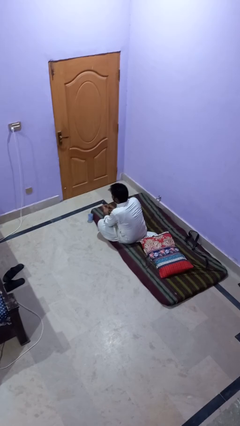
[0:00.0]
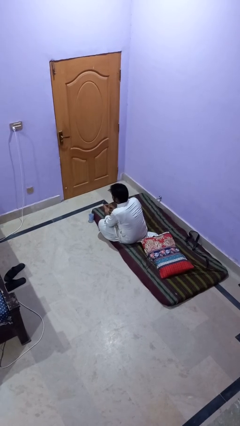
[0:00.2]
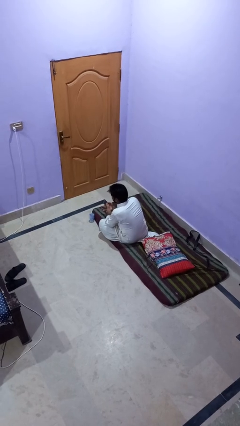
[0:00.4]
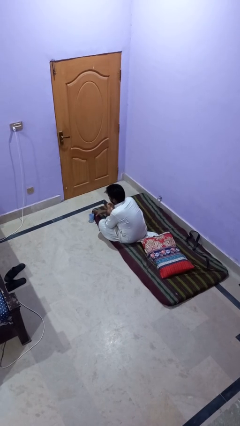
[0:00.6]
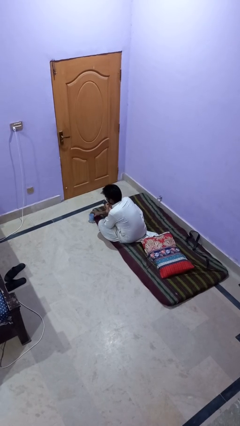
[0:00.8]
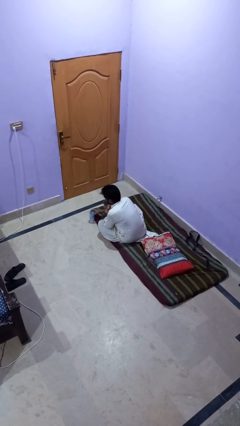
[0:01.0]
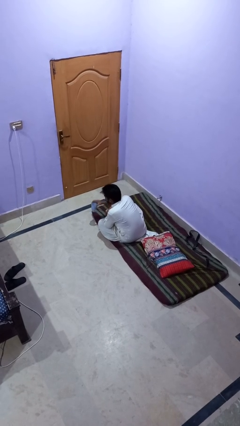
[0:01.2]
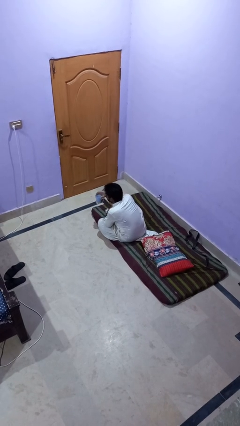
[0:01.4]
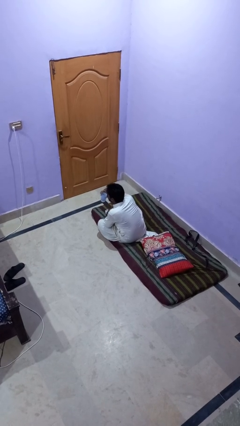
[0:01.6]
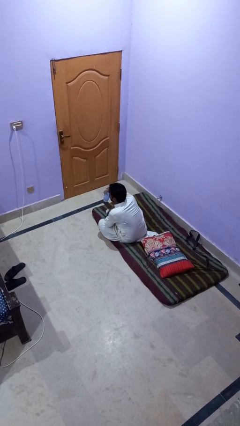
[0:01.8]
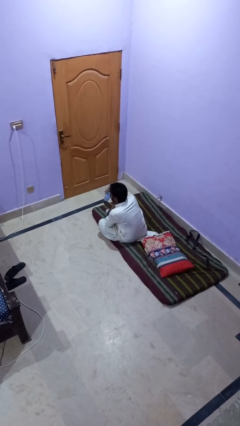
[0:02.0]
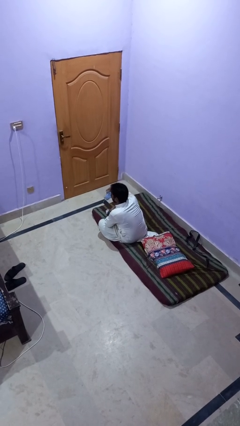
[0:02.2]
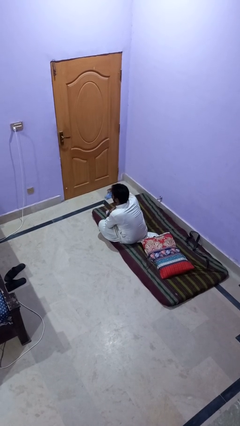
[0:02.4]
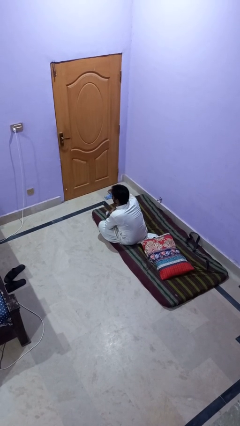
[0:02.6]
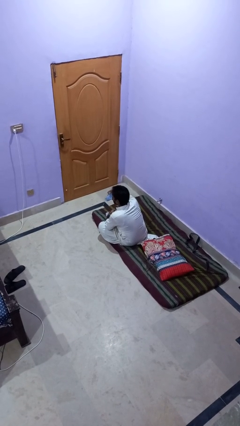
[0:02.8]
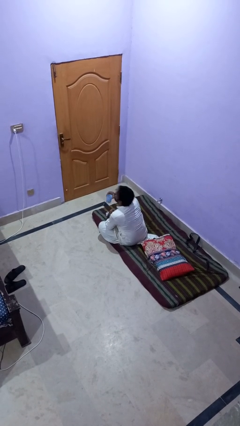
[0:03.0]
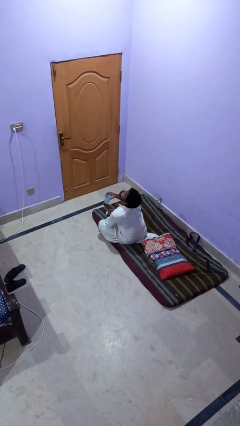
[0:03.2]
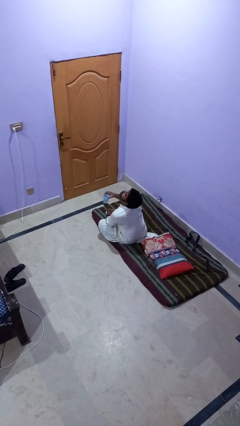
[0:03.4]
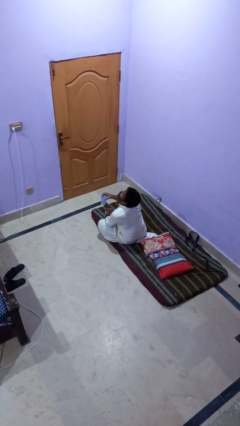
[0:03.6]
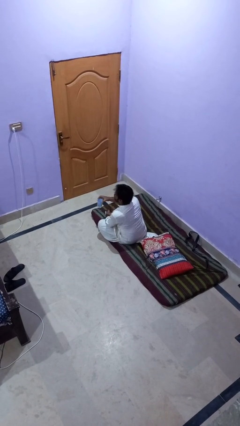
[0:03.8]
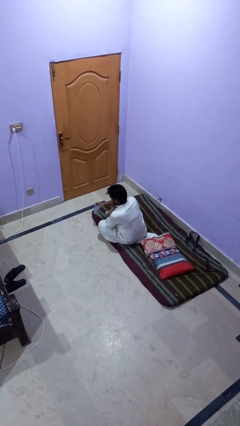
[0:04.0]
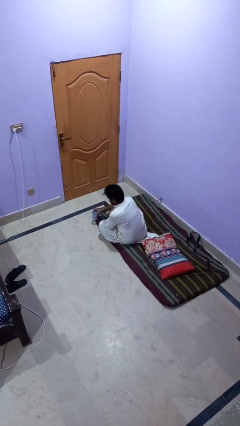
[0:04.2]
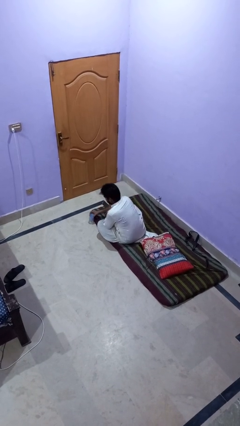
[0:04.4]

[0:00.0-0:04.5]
person drinks from cup

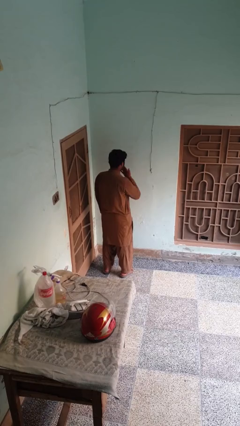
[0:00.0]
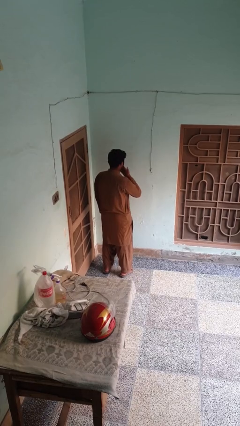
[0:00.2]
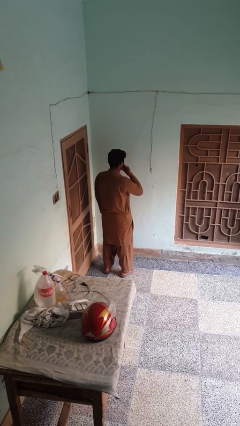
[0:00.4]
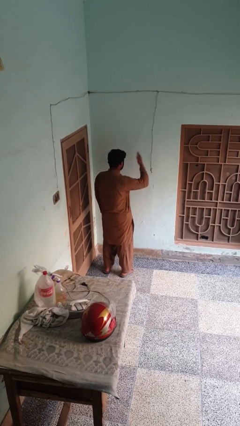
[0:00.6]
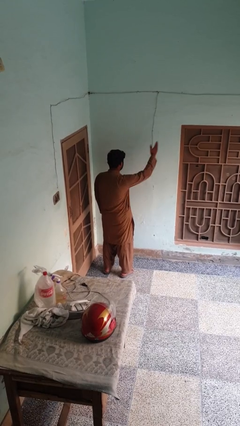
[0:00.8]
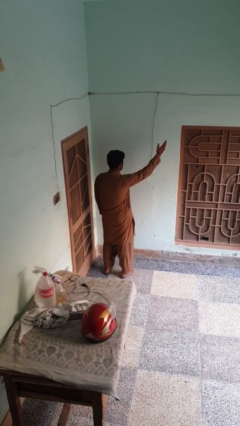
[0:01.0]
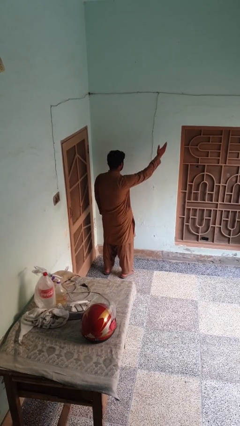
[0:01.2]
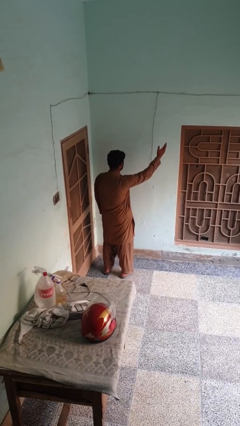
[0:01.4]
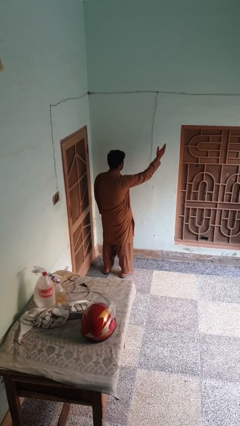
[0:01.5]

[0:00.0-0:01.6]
person gestures blow kiss

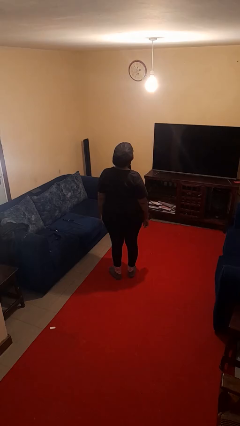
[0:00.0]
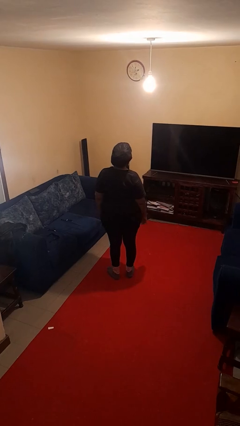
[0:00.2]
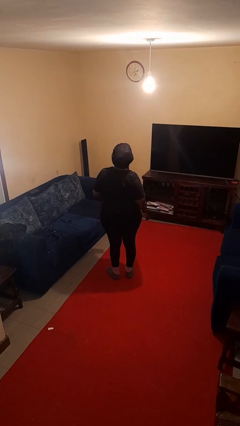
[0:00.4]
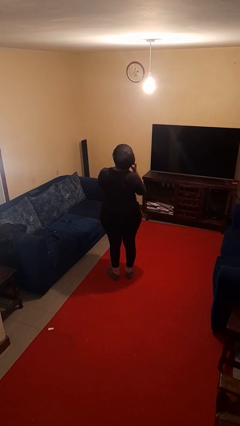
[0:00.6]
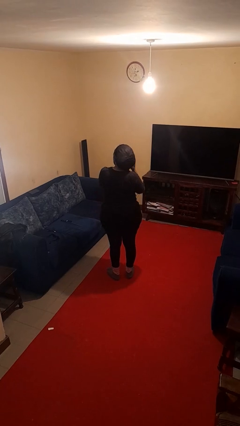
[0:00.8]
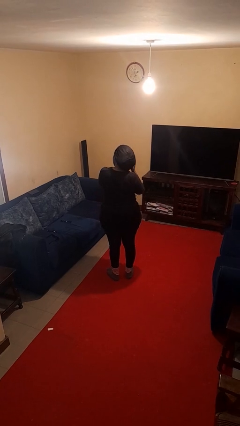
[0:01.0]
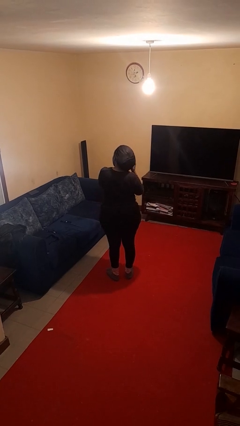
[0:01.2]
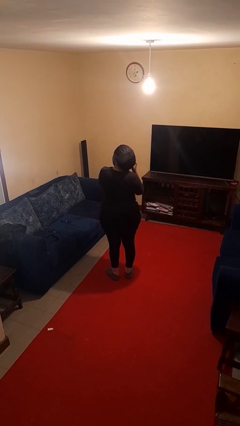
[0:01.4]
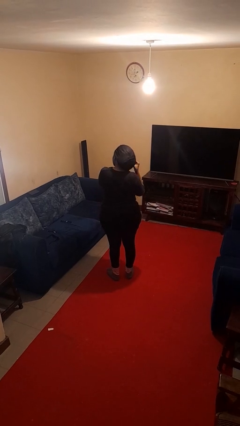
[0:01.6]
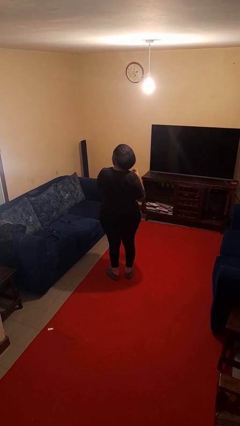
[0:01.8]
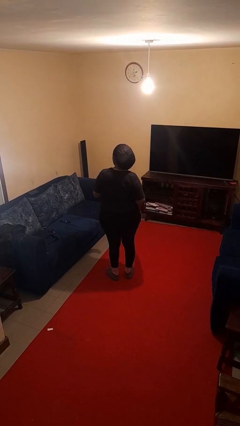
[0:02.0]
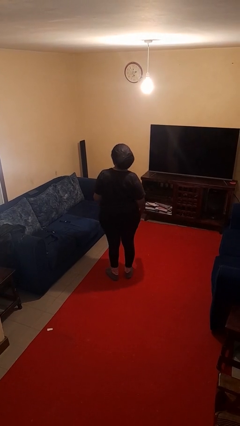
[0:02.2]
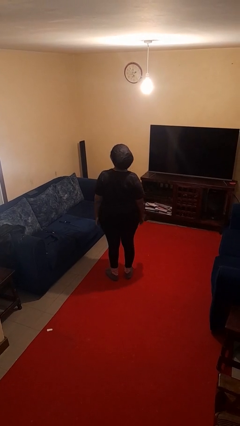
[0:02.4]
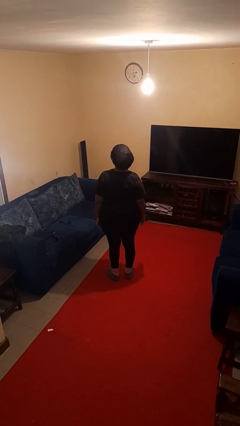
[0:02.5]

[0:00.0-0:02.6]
person takes off earrings

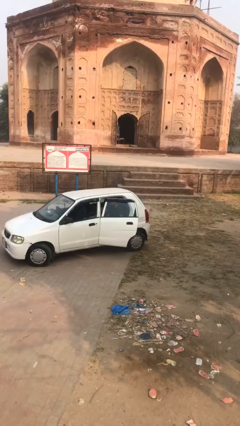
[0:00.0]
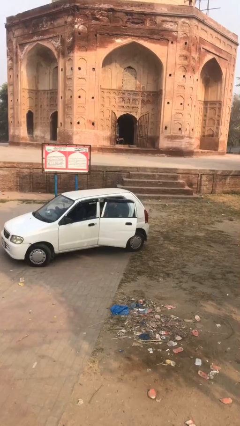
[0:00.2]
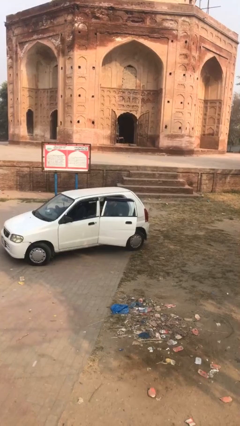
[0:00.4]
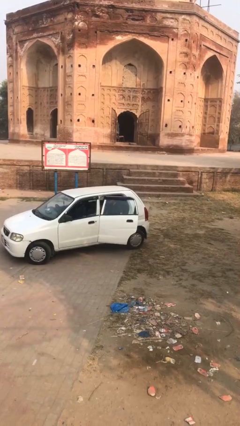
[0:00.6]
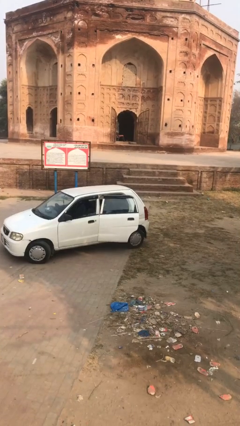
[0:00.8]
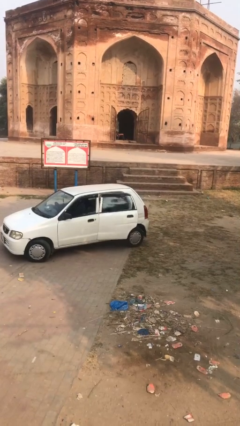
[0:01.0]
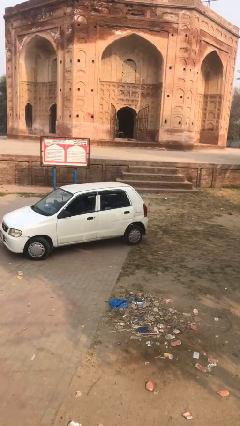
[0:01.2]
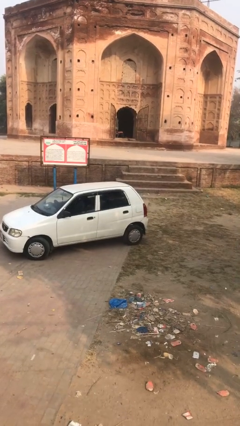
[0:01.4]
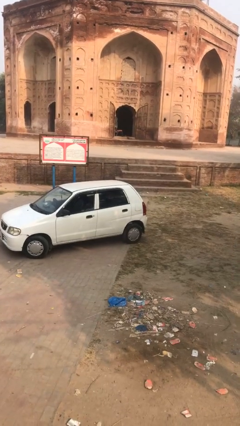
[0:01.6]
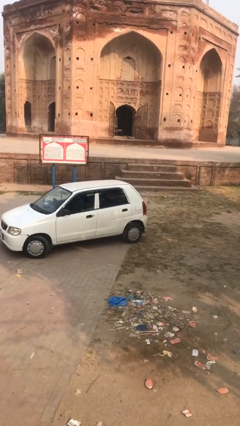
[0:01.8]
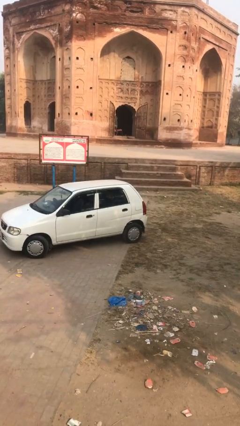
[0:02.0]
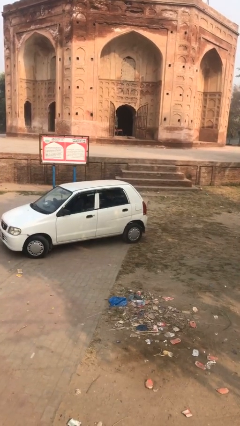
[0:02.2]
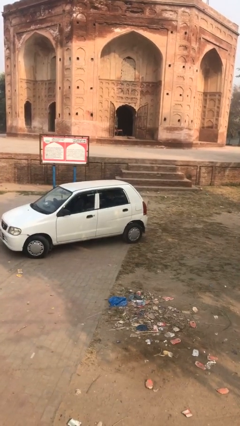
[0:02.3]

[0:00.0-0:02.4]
person closes car door

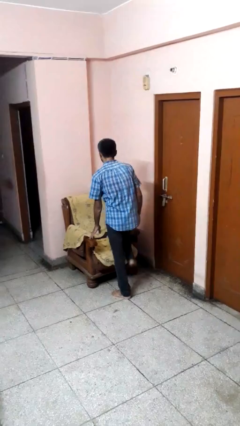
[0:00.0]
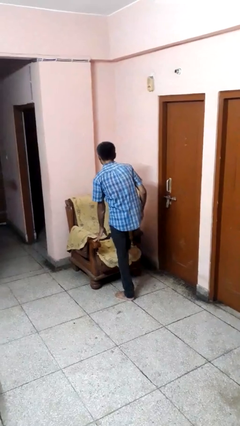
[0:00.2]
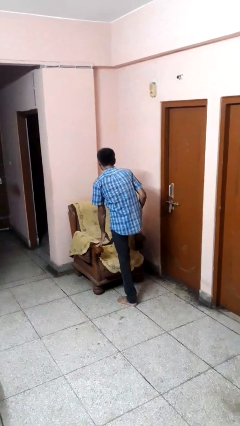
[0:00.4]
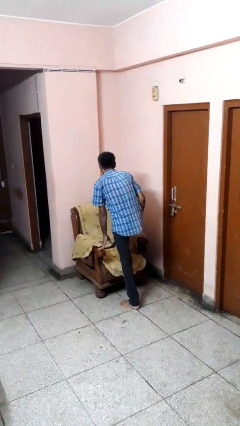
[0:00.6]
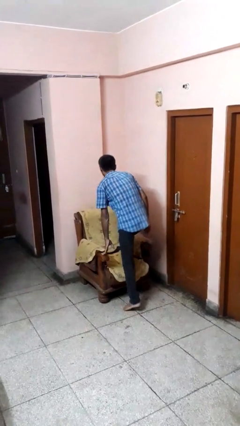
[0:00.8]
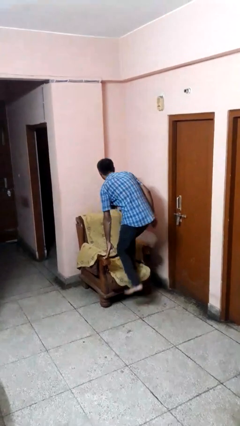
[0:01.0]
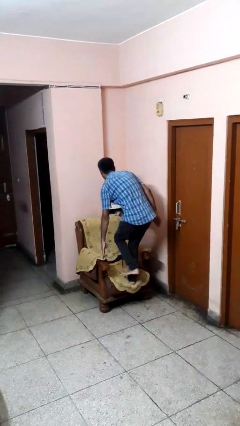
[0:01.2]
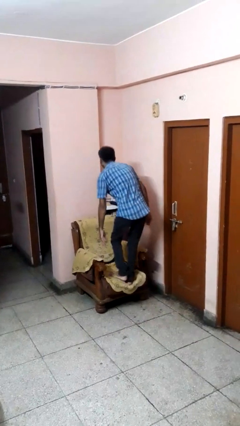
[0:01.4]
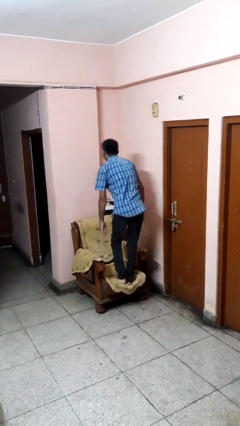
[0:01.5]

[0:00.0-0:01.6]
person climbs on couch

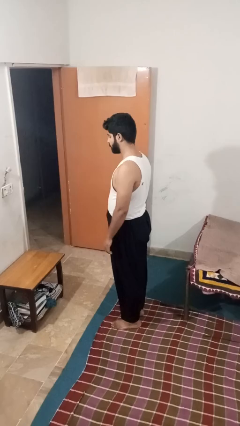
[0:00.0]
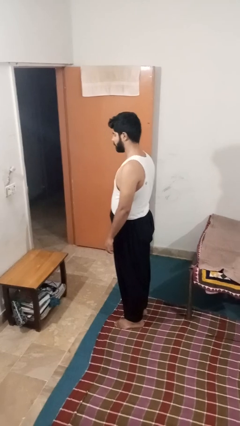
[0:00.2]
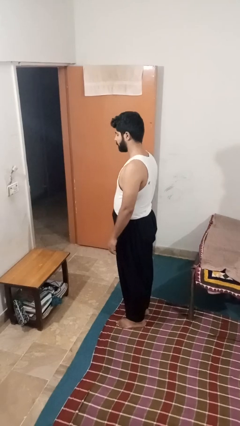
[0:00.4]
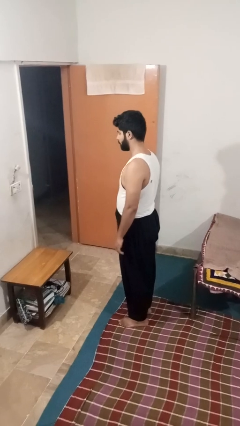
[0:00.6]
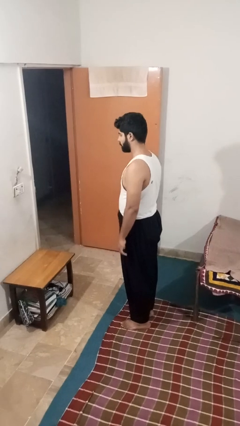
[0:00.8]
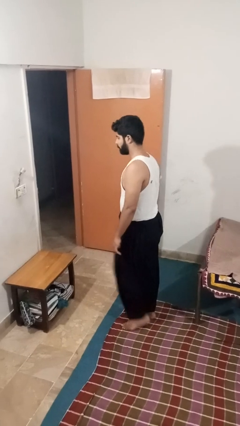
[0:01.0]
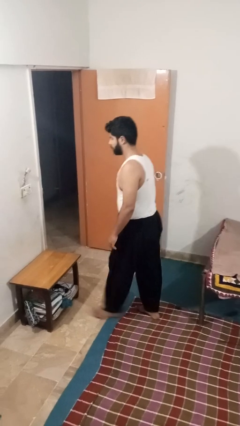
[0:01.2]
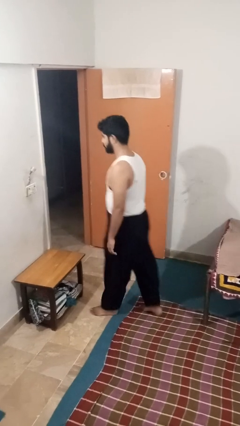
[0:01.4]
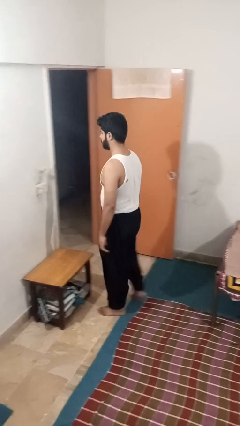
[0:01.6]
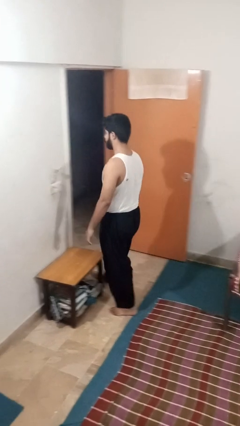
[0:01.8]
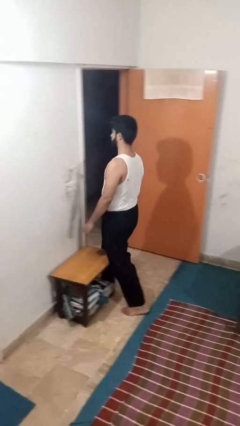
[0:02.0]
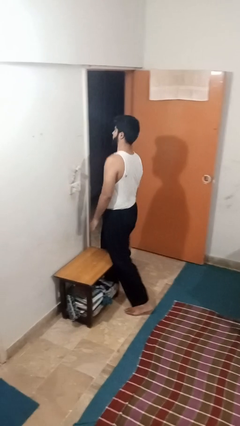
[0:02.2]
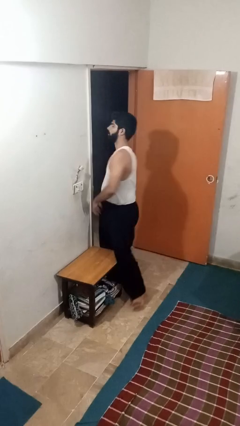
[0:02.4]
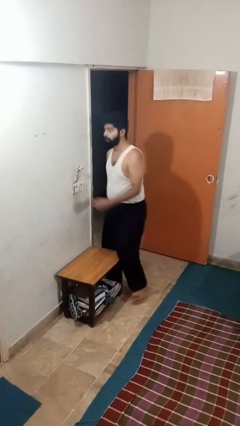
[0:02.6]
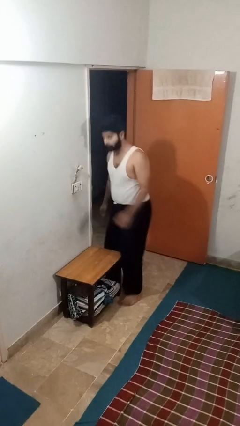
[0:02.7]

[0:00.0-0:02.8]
person bumps into table

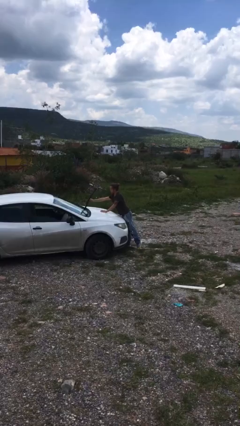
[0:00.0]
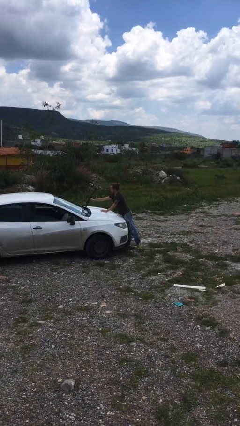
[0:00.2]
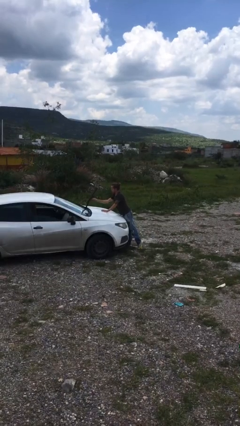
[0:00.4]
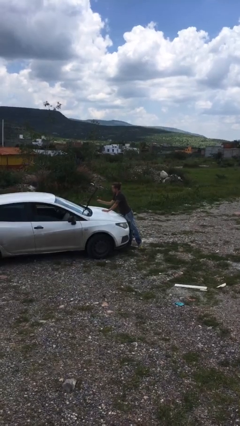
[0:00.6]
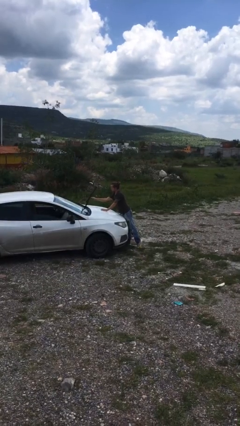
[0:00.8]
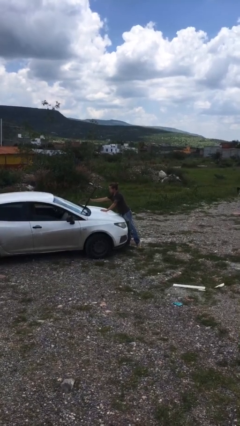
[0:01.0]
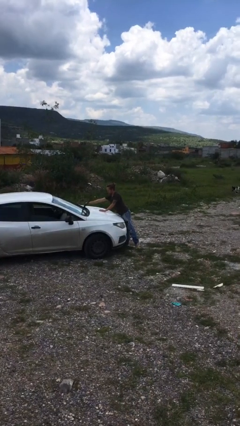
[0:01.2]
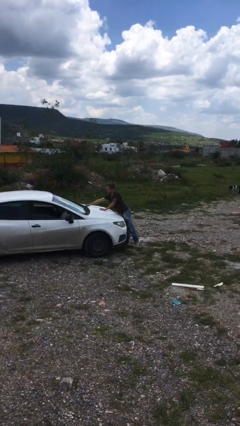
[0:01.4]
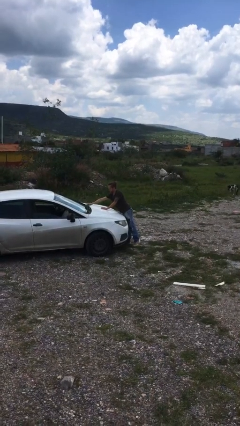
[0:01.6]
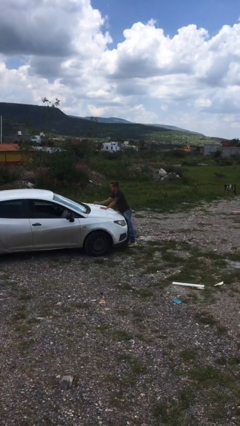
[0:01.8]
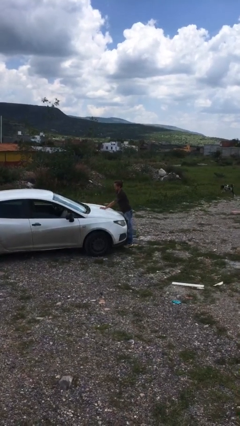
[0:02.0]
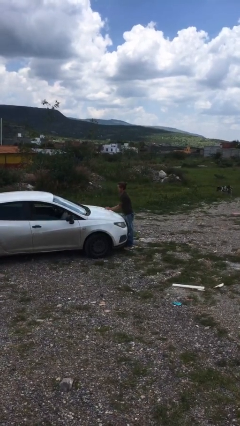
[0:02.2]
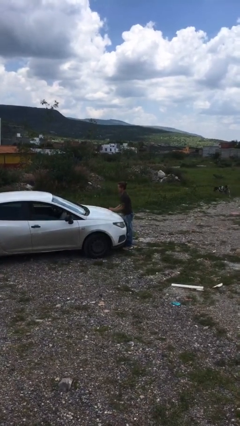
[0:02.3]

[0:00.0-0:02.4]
person flips down car wipers
